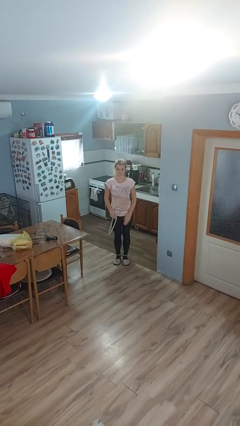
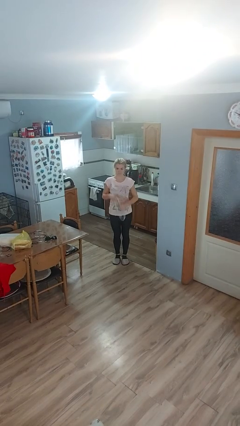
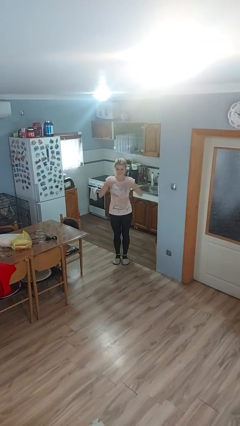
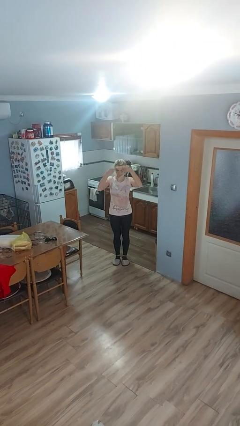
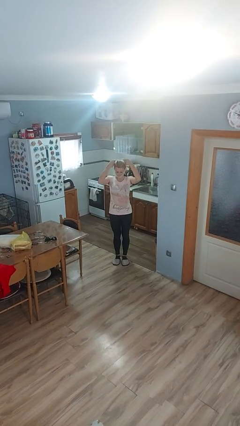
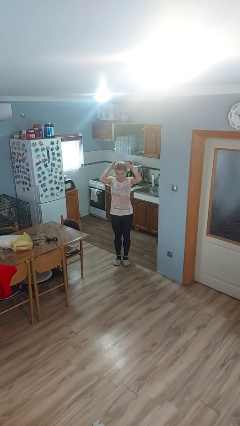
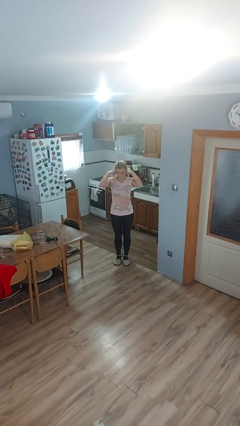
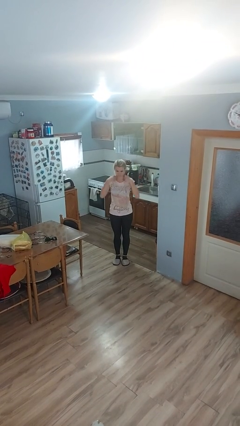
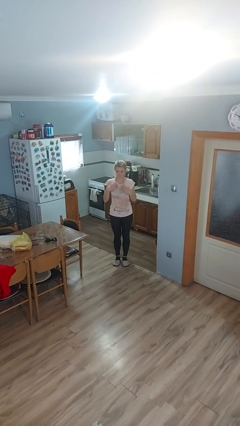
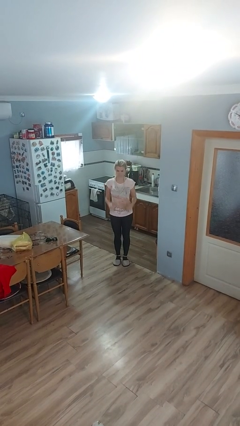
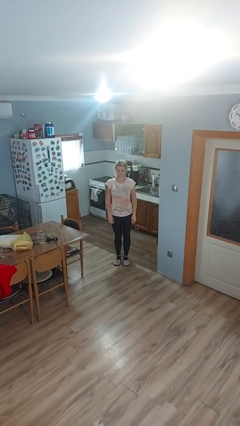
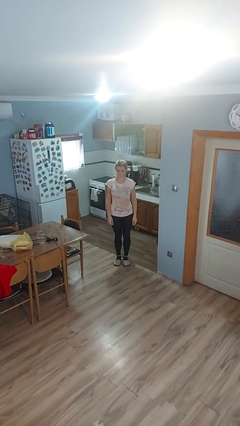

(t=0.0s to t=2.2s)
person puts on necklace

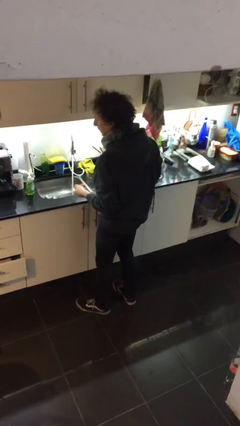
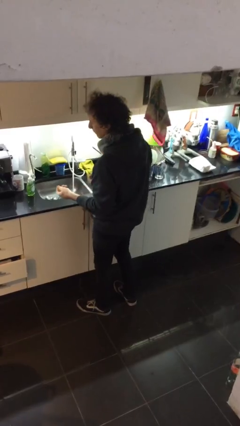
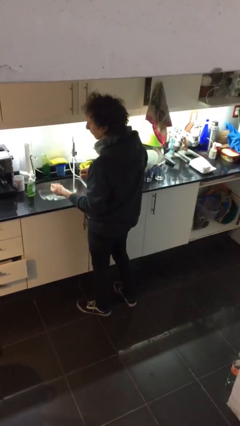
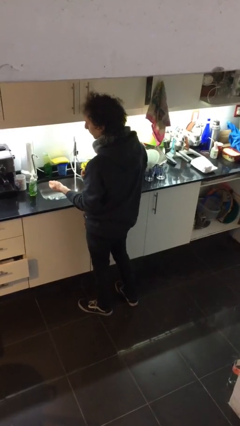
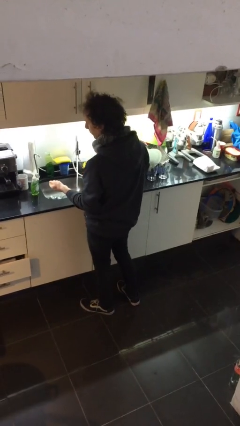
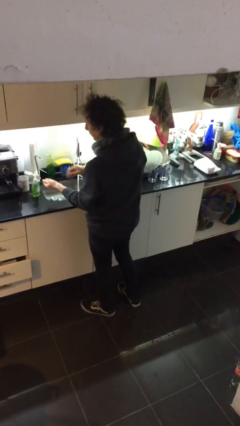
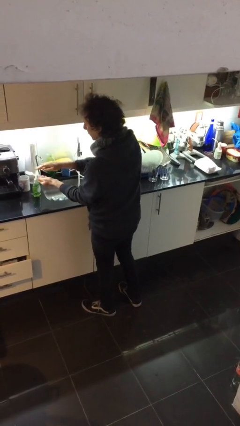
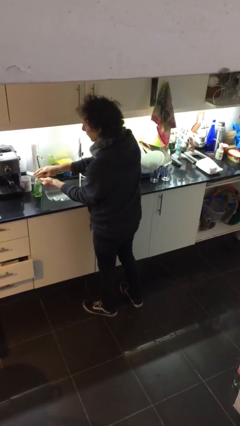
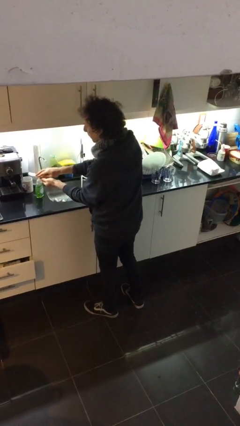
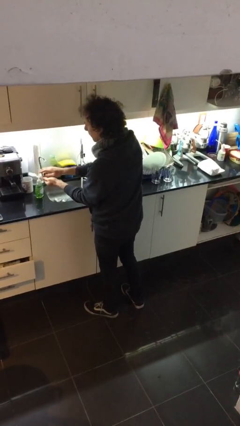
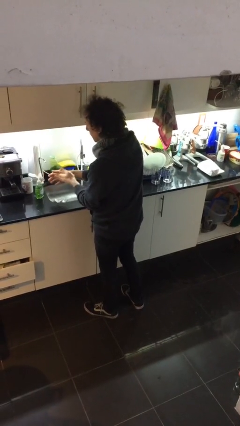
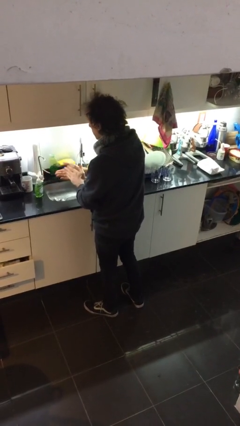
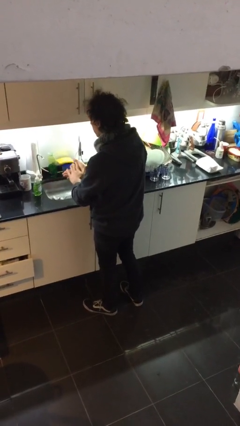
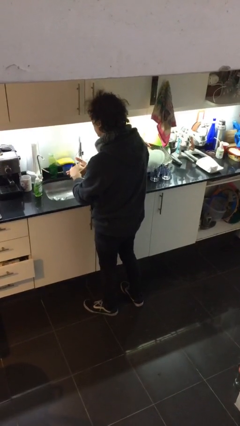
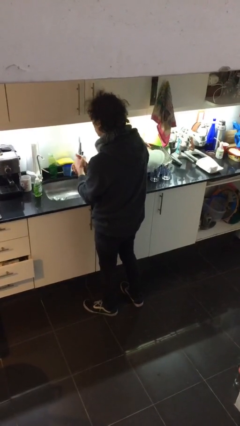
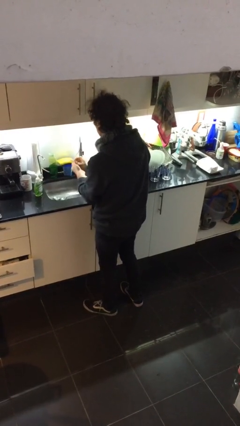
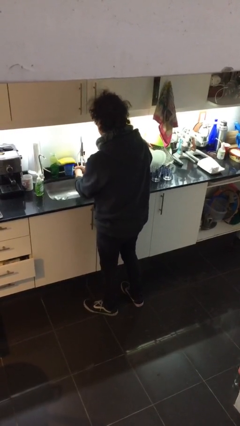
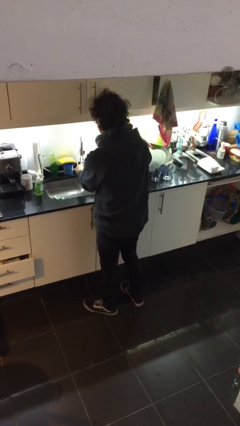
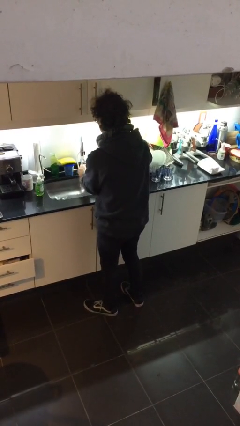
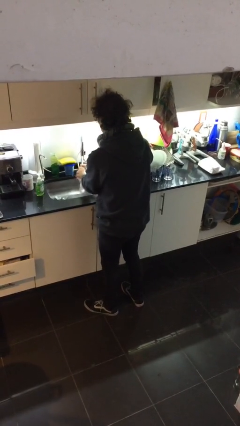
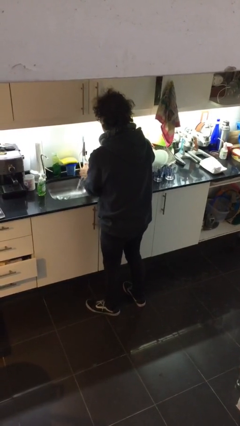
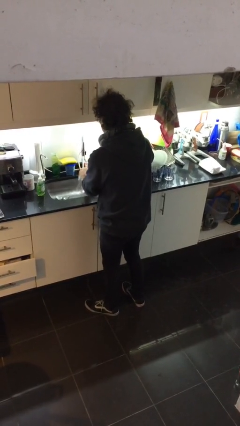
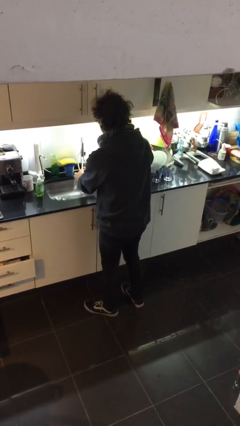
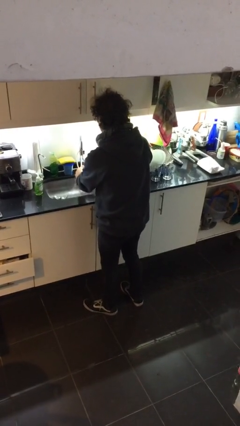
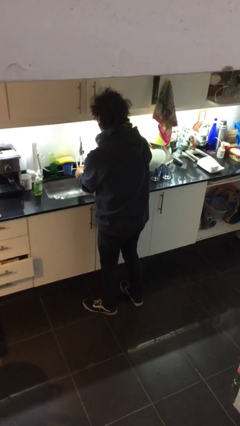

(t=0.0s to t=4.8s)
person washes hands

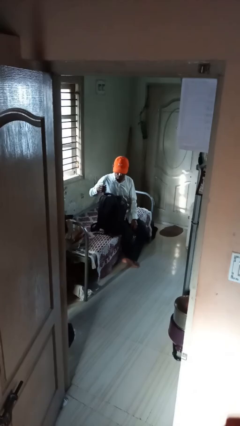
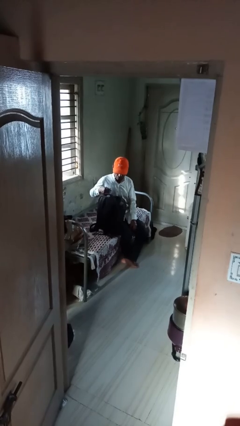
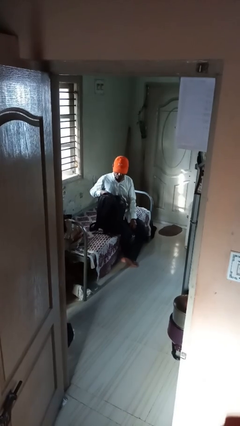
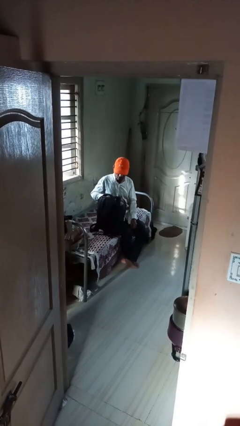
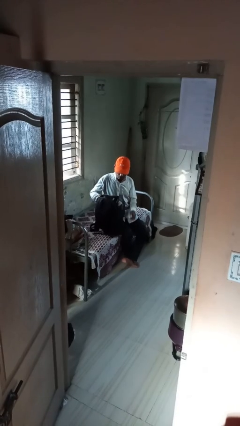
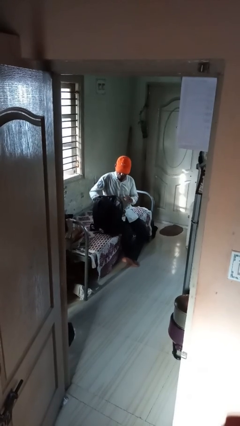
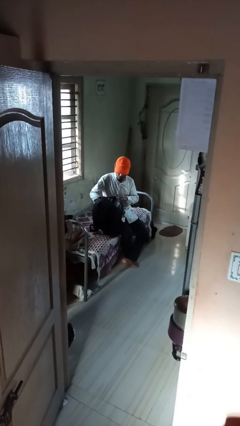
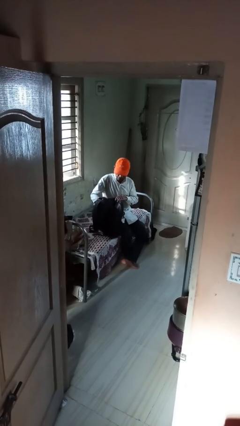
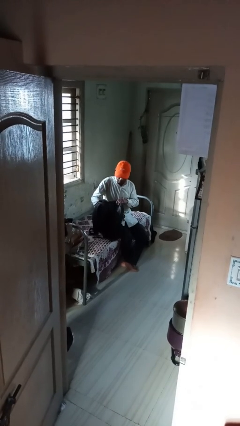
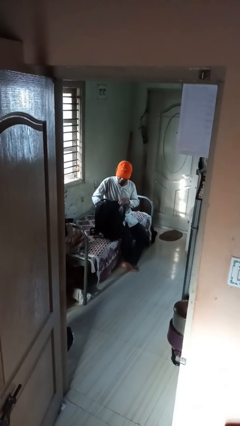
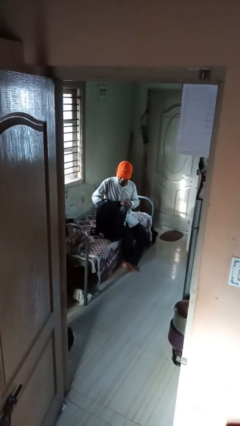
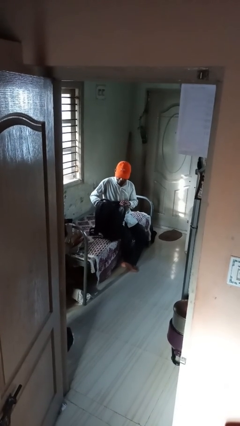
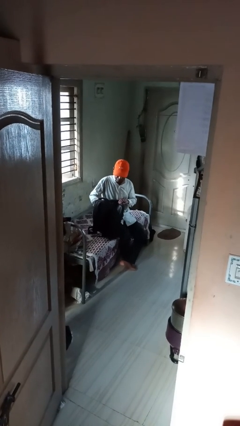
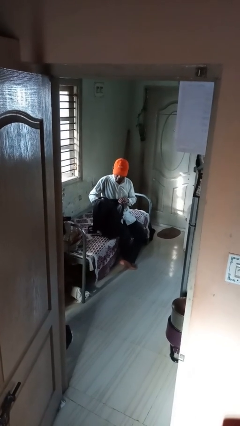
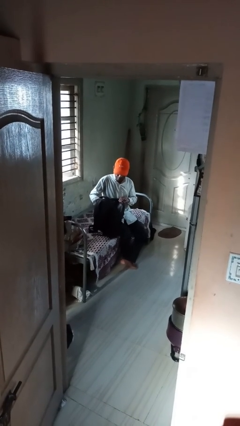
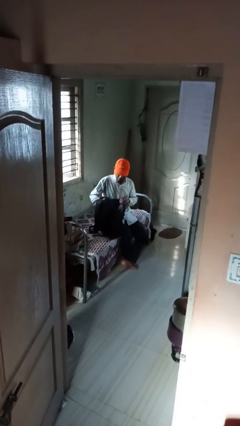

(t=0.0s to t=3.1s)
person searches in backpack

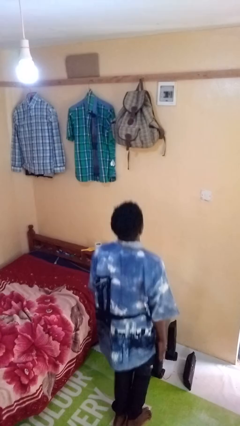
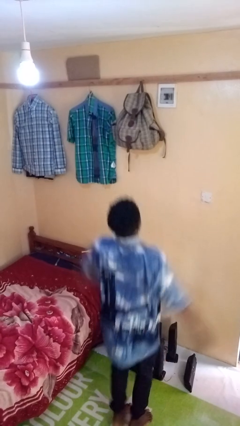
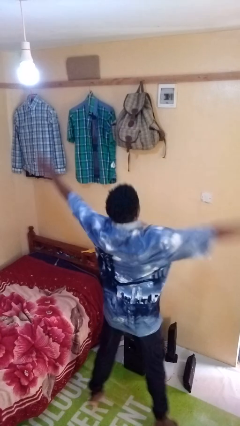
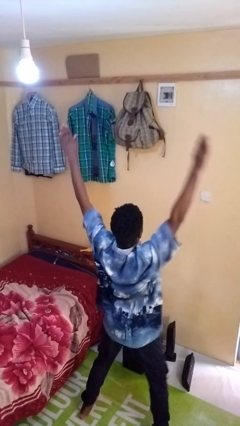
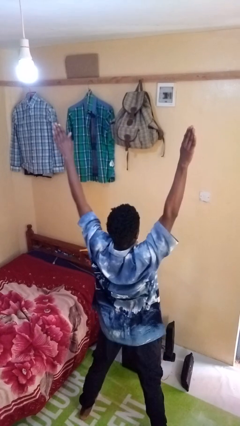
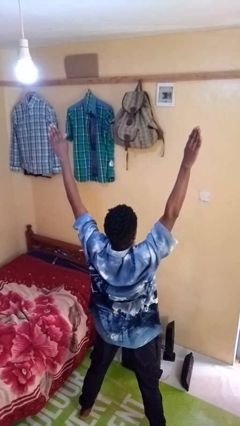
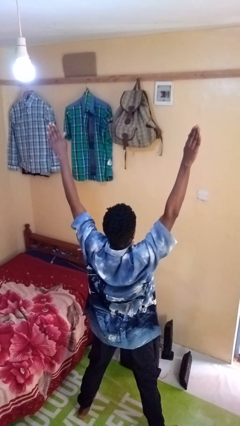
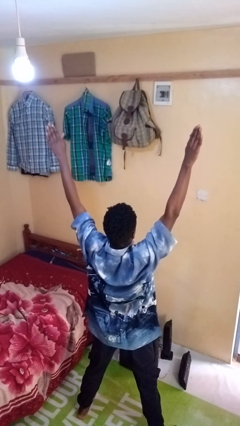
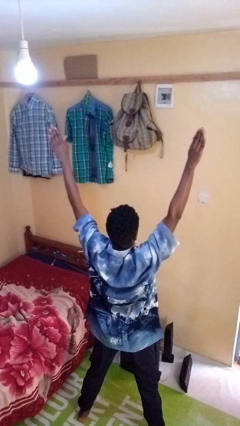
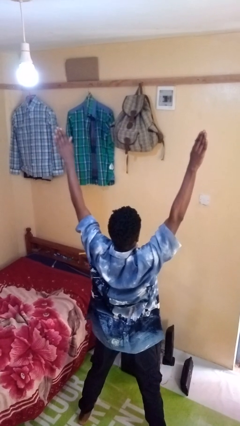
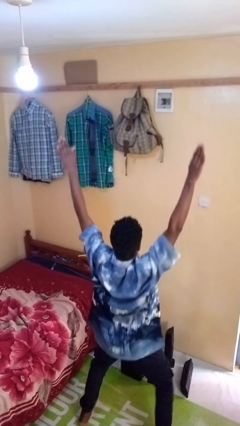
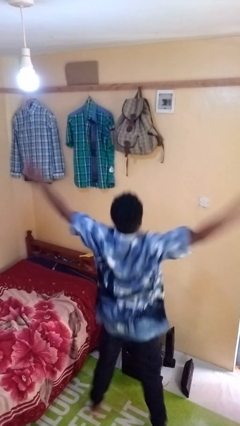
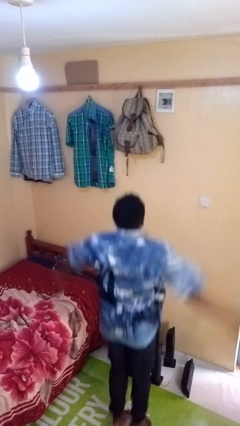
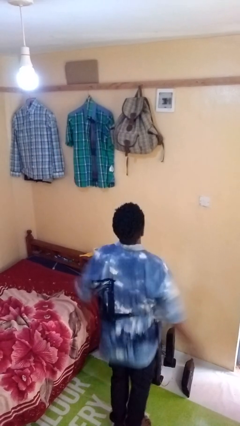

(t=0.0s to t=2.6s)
person exercises with jumping jacks

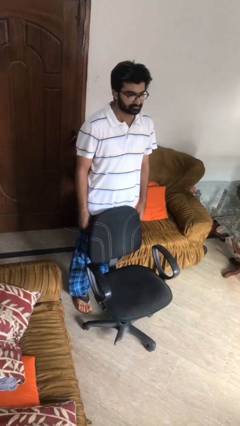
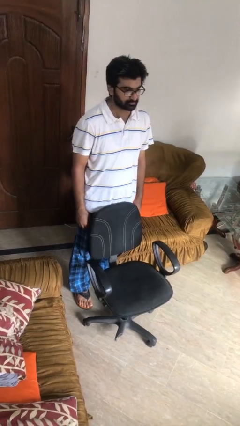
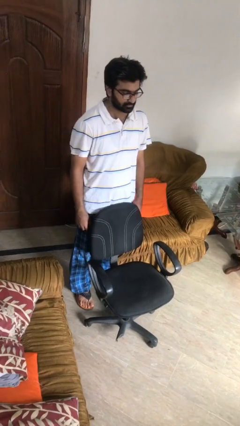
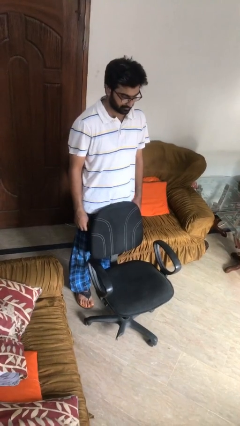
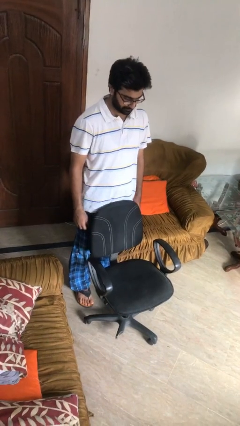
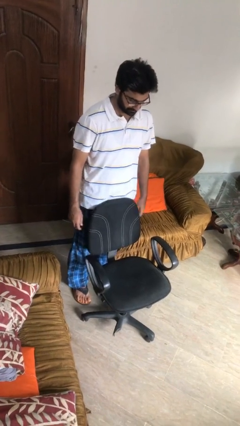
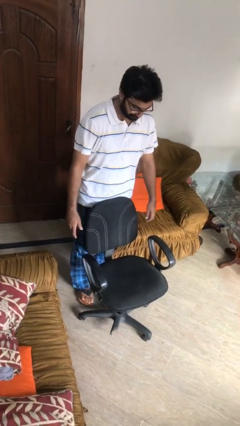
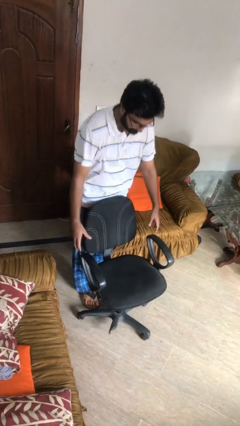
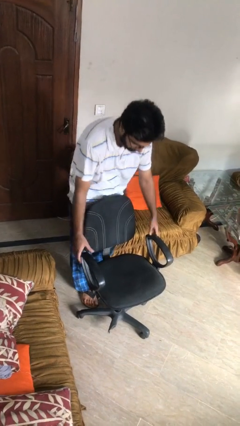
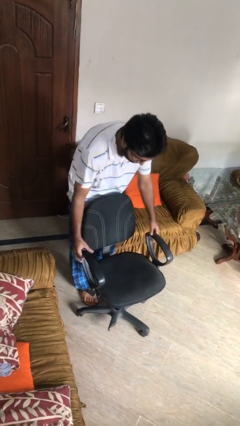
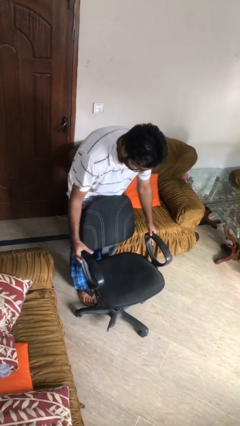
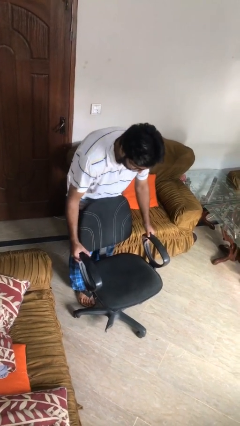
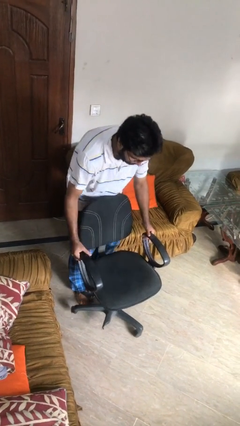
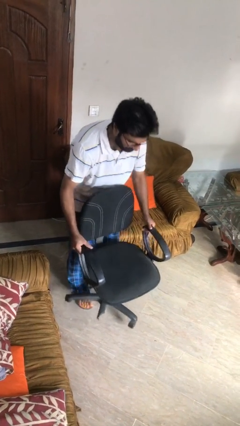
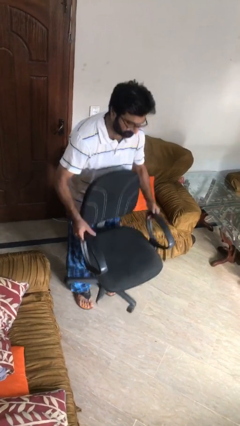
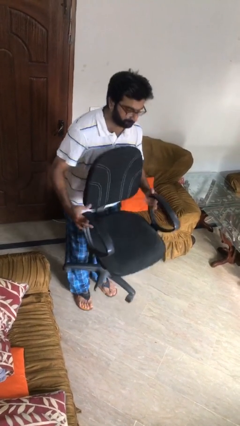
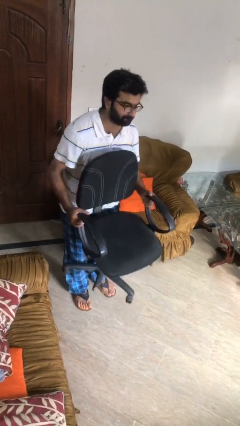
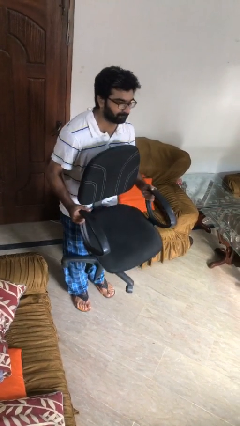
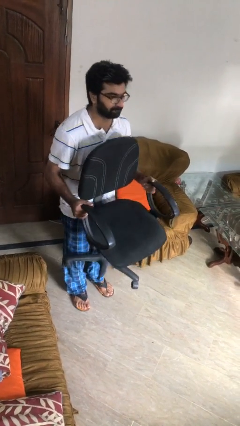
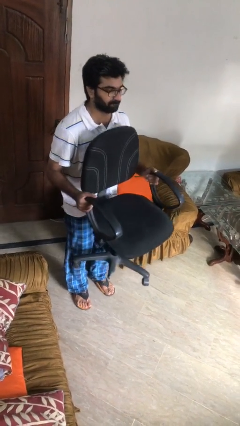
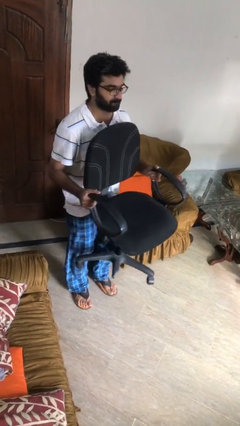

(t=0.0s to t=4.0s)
person picks up object from floor

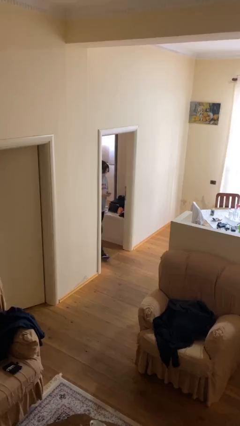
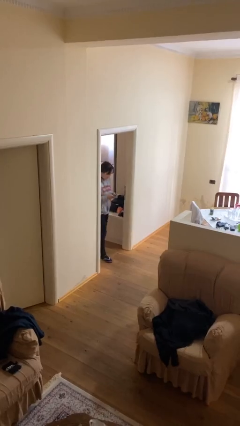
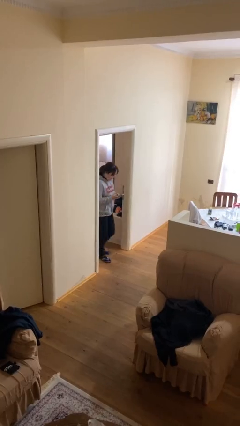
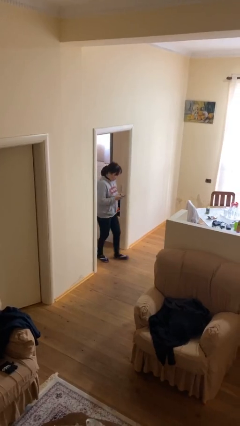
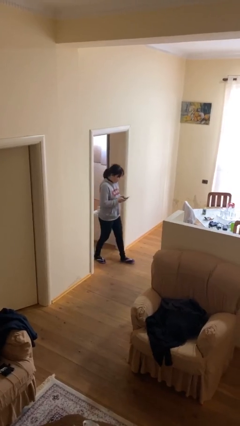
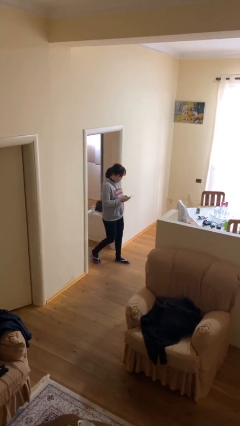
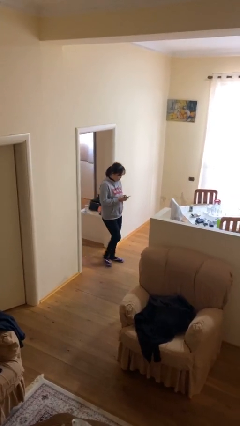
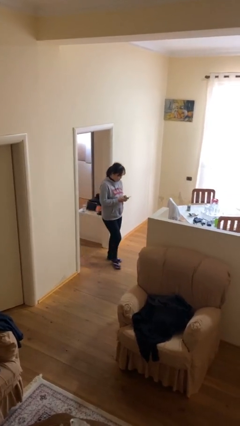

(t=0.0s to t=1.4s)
person enters scene through structure
